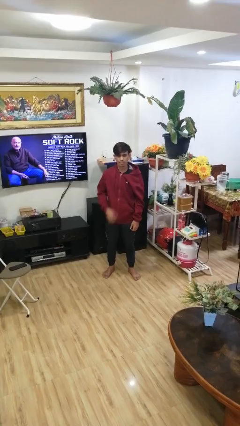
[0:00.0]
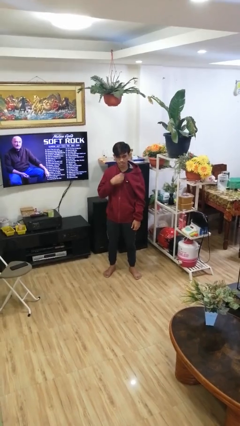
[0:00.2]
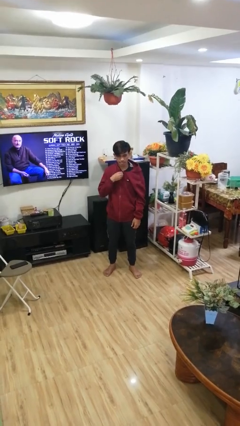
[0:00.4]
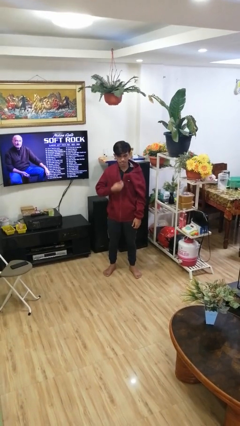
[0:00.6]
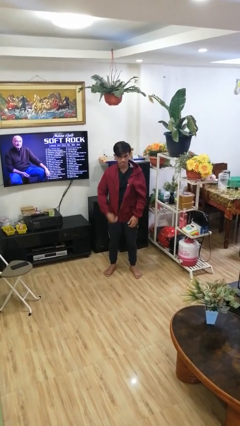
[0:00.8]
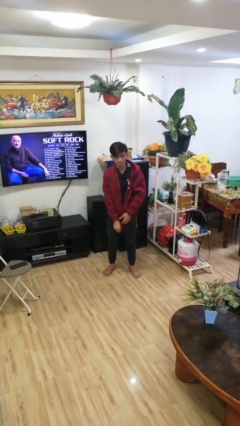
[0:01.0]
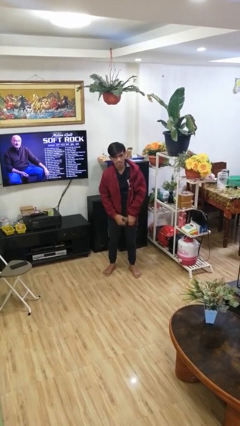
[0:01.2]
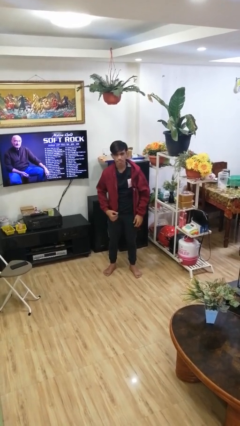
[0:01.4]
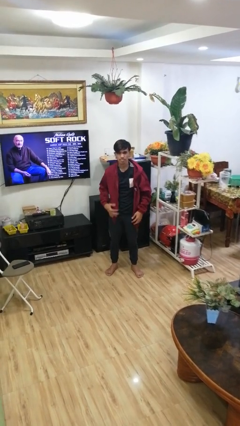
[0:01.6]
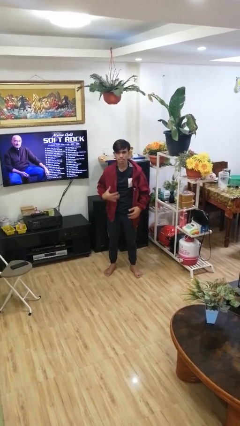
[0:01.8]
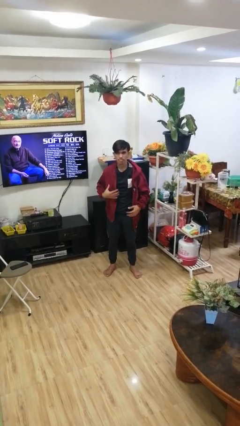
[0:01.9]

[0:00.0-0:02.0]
person unzips jacket

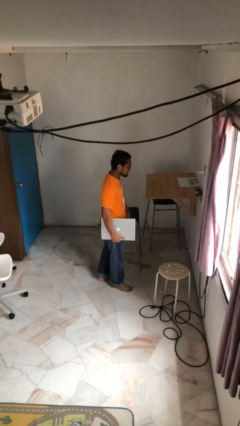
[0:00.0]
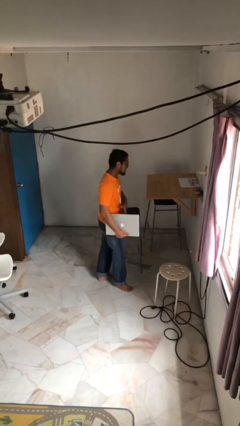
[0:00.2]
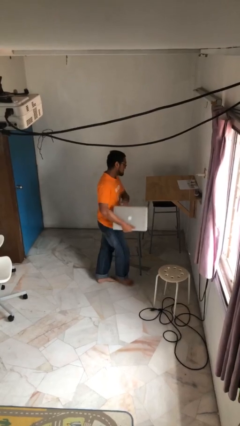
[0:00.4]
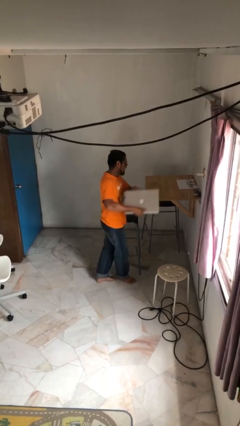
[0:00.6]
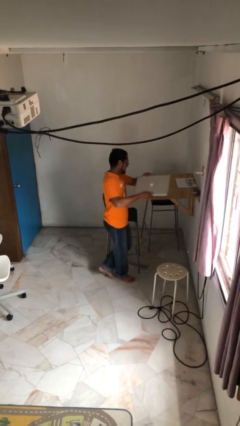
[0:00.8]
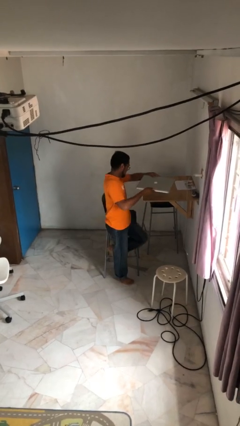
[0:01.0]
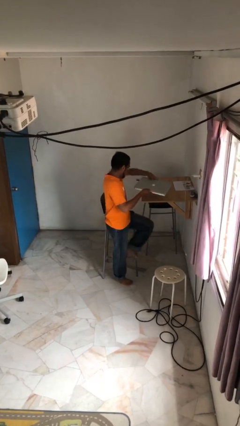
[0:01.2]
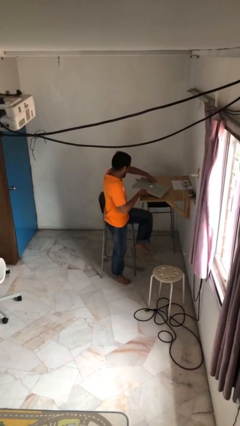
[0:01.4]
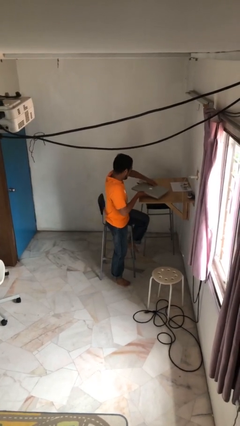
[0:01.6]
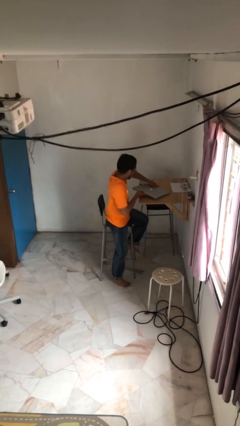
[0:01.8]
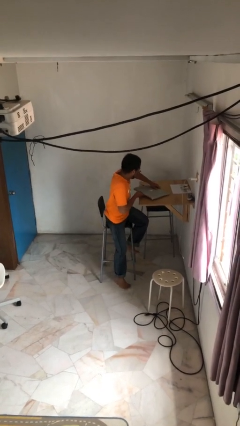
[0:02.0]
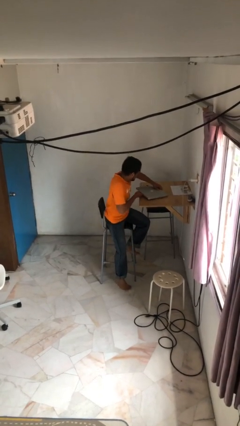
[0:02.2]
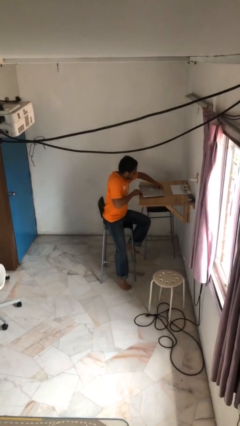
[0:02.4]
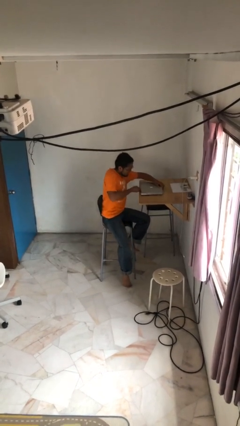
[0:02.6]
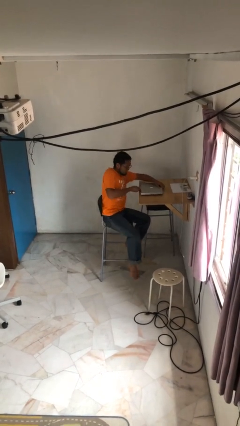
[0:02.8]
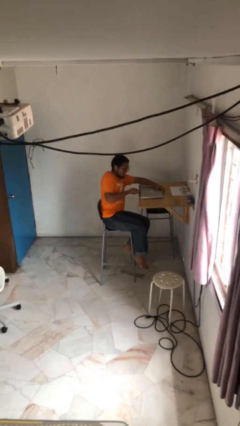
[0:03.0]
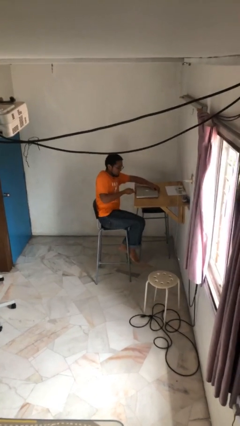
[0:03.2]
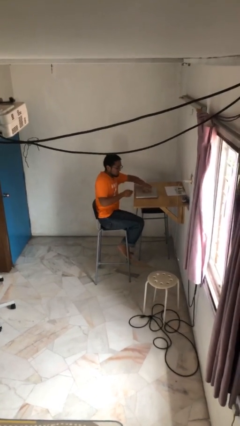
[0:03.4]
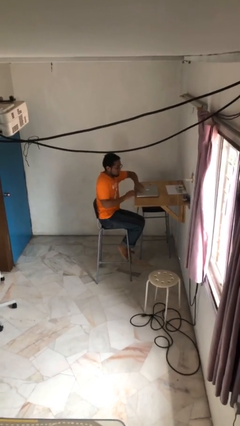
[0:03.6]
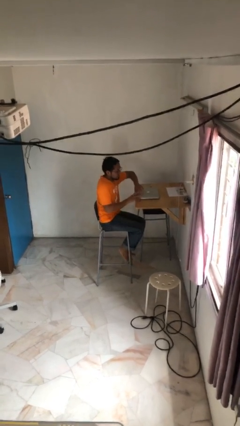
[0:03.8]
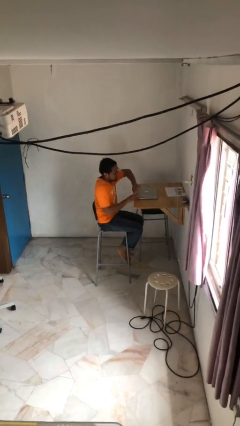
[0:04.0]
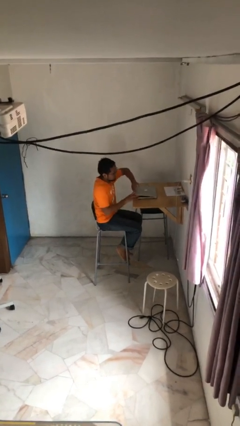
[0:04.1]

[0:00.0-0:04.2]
person sits down

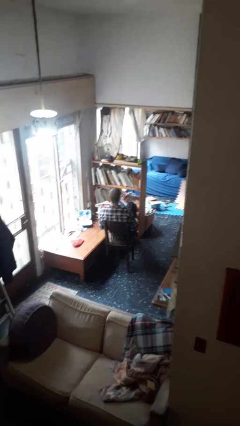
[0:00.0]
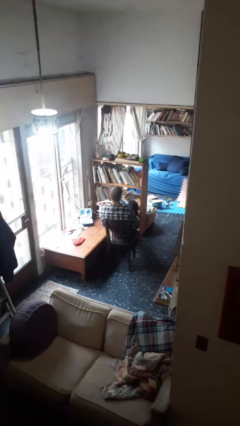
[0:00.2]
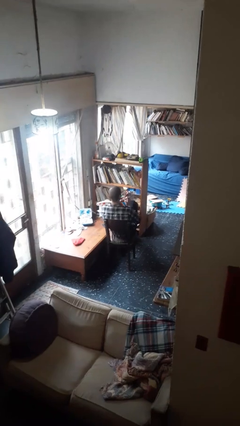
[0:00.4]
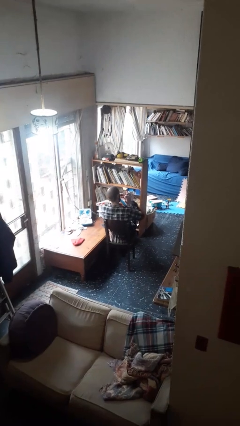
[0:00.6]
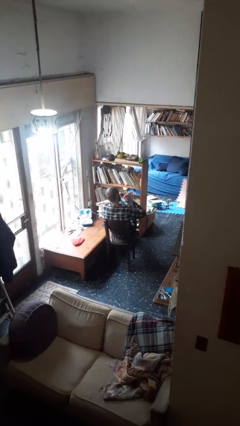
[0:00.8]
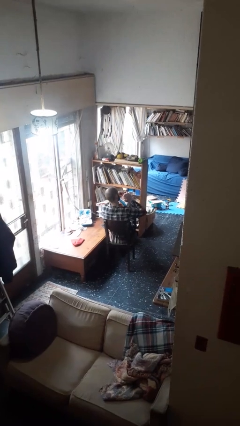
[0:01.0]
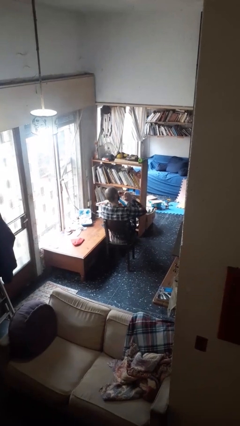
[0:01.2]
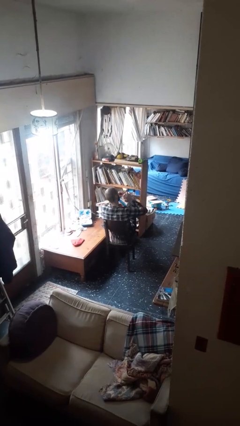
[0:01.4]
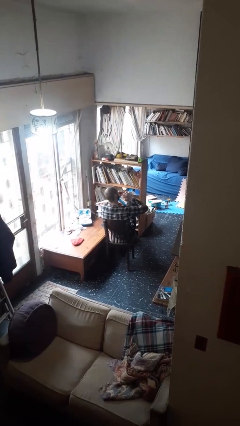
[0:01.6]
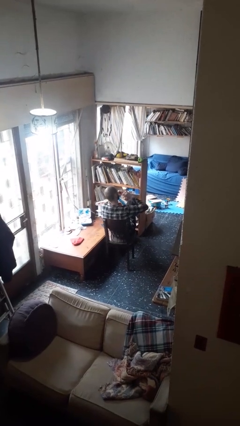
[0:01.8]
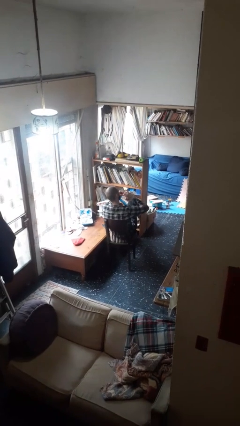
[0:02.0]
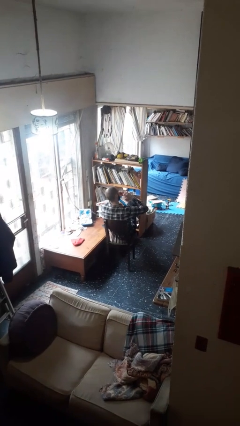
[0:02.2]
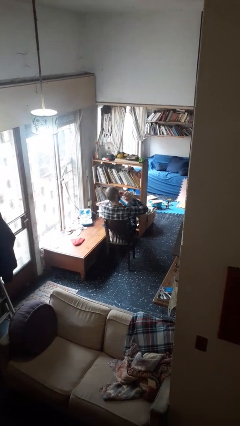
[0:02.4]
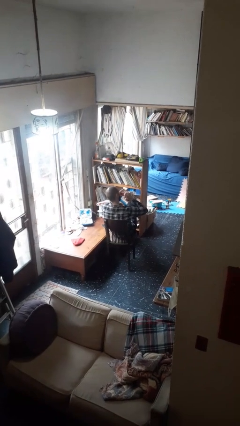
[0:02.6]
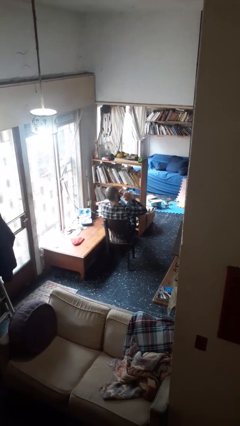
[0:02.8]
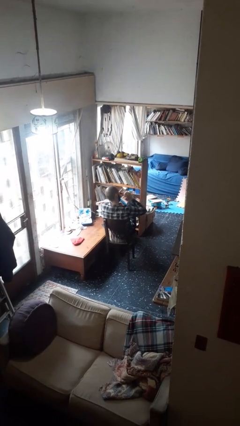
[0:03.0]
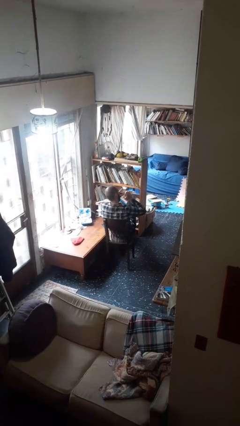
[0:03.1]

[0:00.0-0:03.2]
person files fingernails

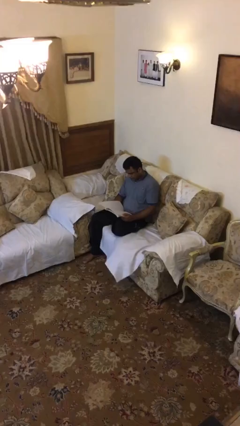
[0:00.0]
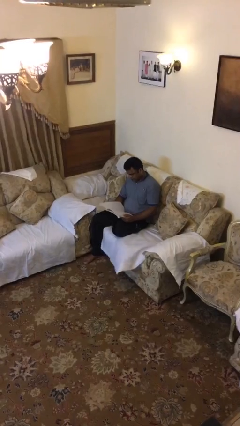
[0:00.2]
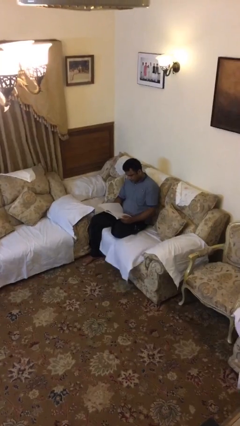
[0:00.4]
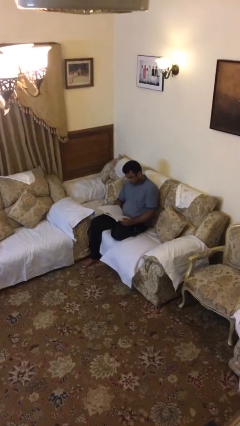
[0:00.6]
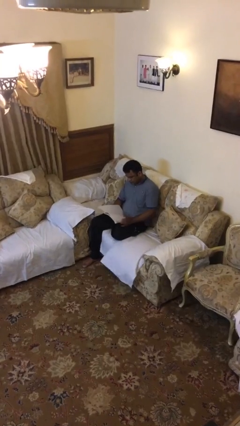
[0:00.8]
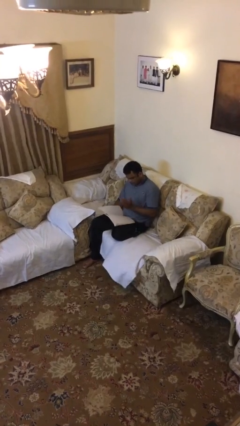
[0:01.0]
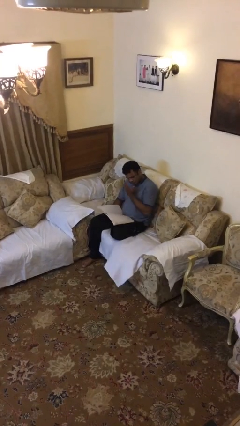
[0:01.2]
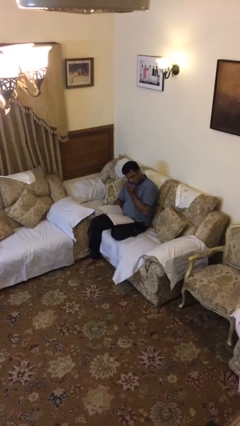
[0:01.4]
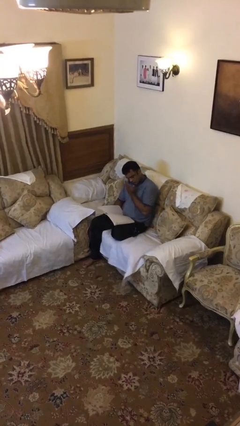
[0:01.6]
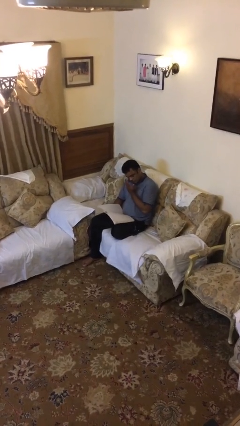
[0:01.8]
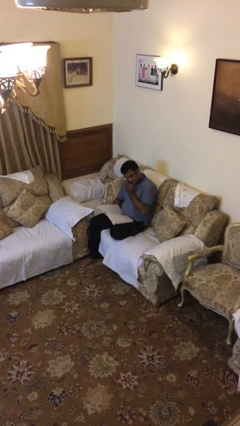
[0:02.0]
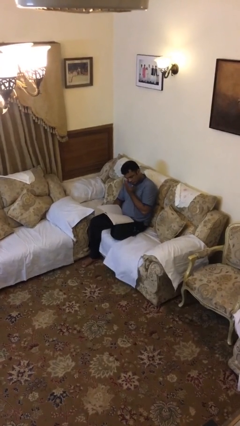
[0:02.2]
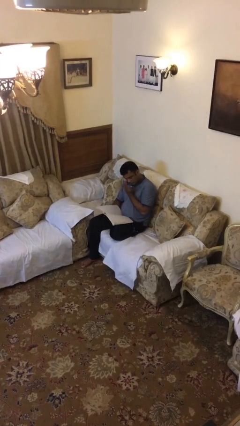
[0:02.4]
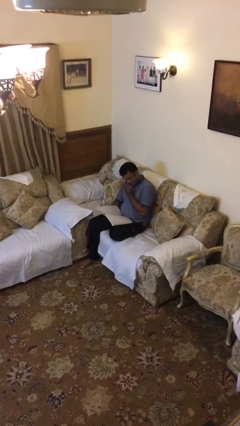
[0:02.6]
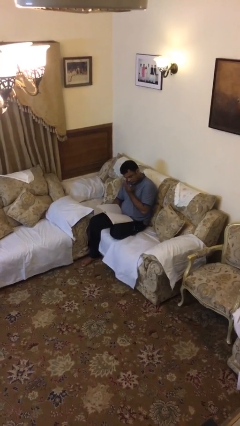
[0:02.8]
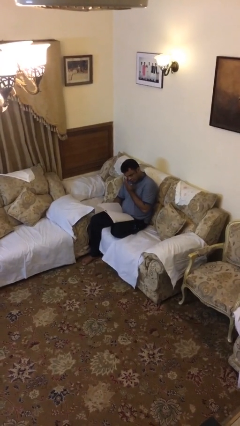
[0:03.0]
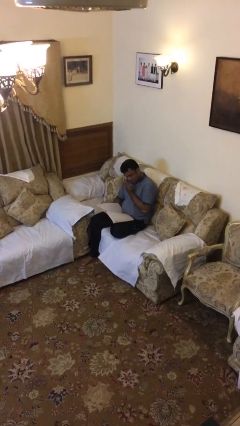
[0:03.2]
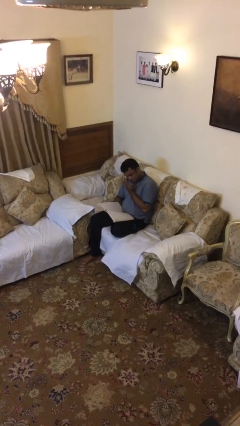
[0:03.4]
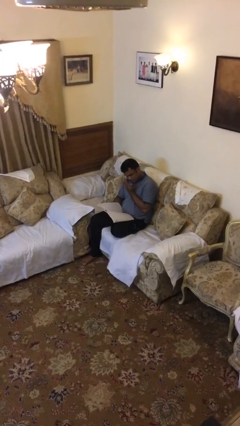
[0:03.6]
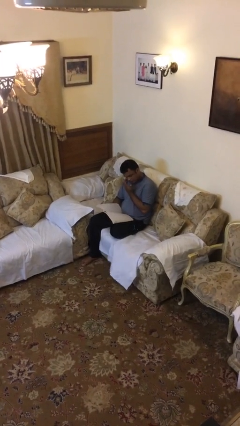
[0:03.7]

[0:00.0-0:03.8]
person reads document

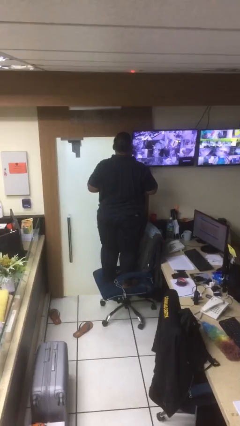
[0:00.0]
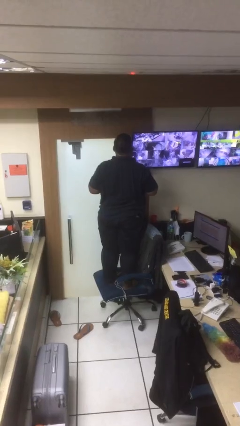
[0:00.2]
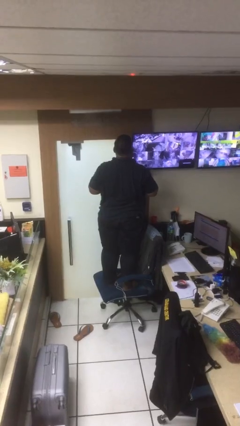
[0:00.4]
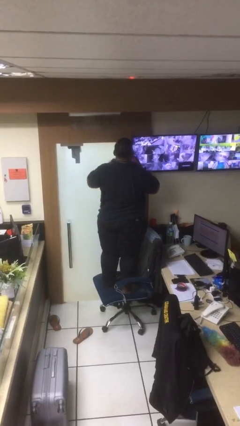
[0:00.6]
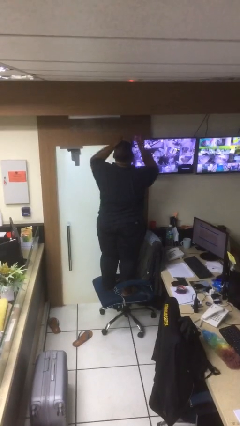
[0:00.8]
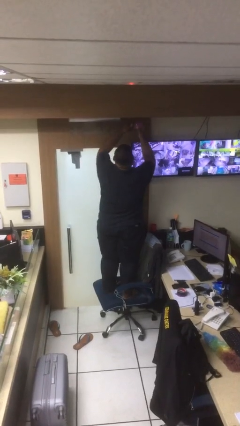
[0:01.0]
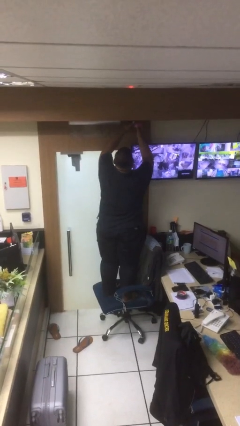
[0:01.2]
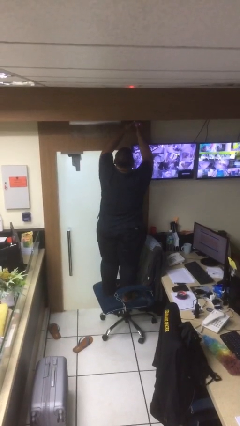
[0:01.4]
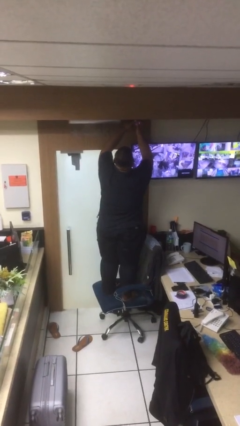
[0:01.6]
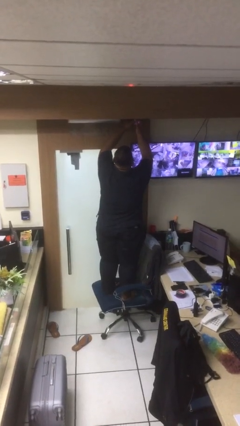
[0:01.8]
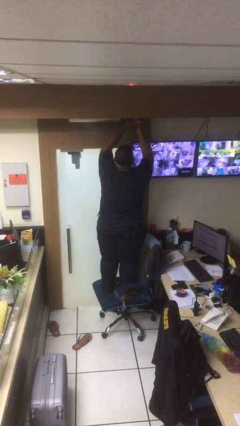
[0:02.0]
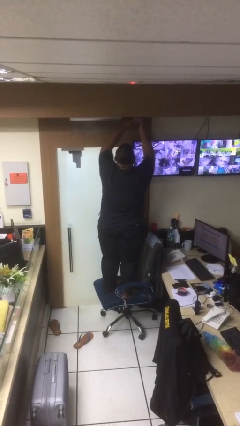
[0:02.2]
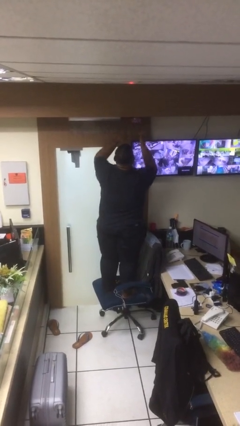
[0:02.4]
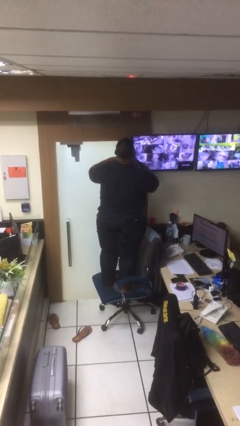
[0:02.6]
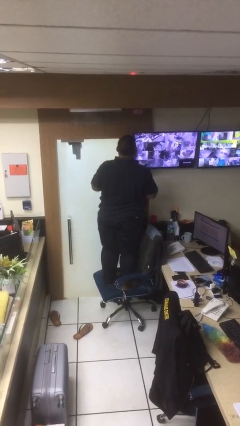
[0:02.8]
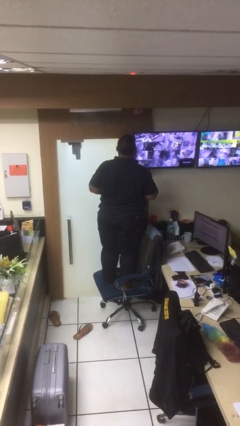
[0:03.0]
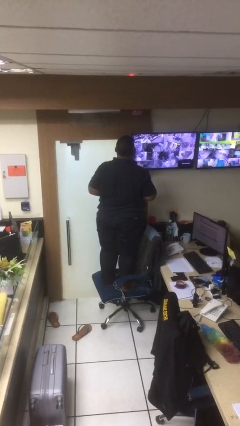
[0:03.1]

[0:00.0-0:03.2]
person puts up smoke detector

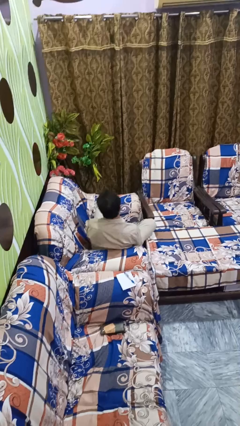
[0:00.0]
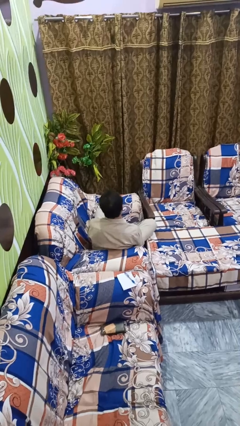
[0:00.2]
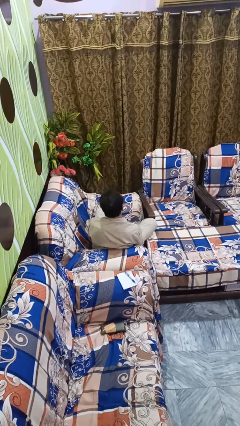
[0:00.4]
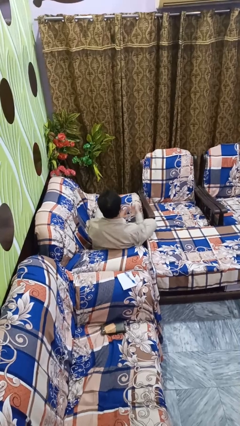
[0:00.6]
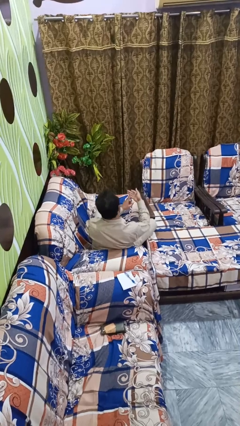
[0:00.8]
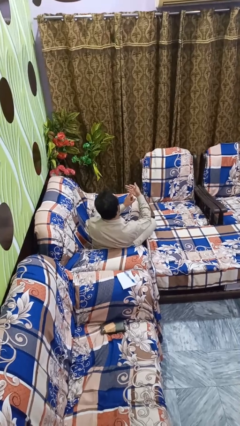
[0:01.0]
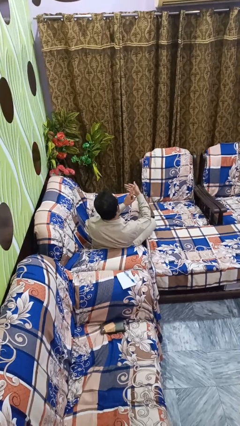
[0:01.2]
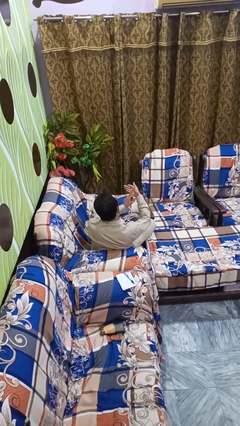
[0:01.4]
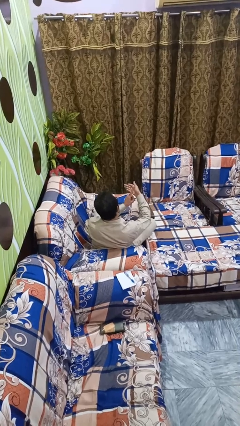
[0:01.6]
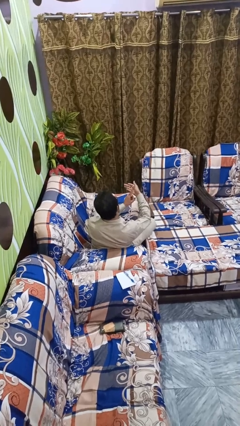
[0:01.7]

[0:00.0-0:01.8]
person gestures number one
